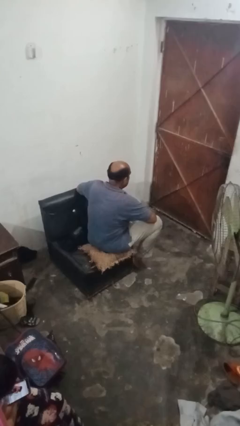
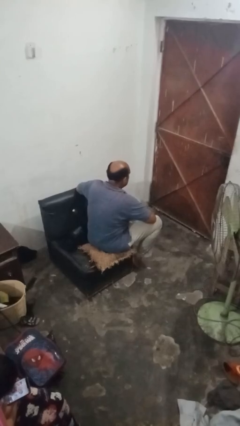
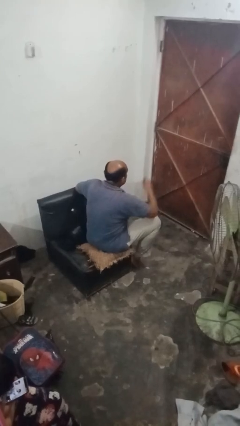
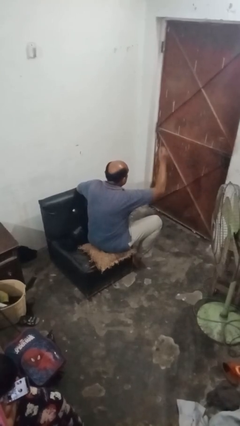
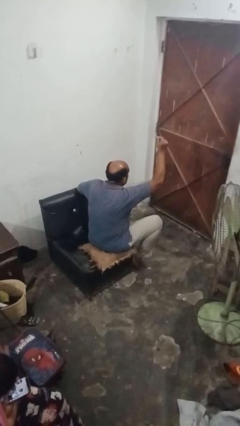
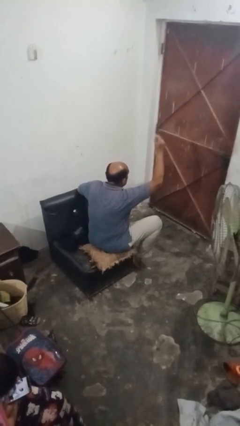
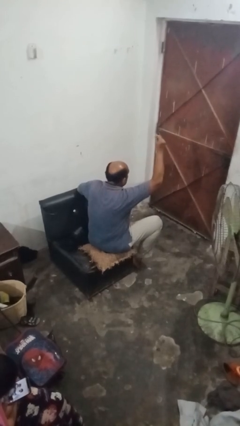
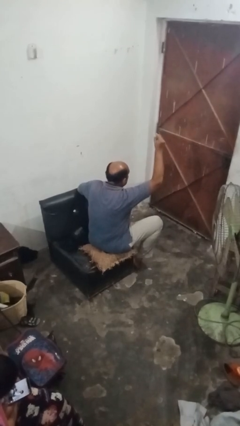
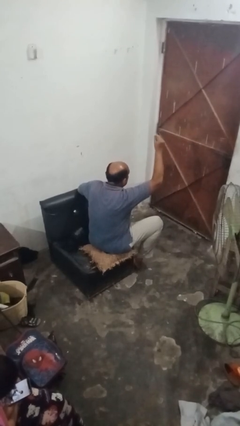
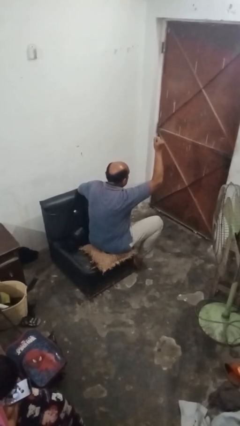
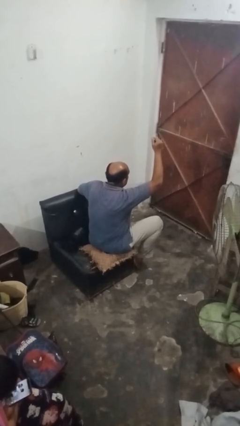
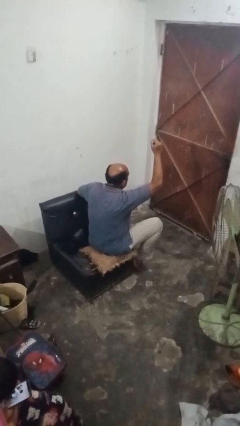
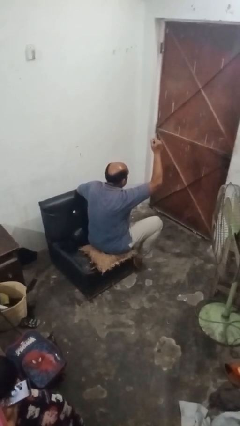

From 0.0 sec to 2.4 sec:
person snaps fingers

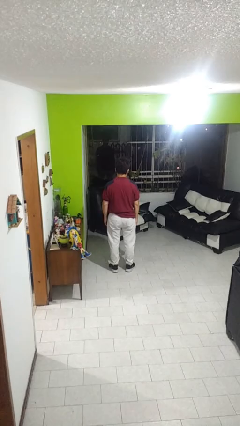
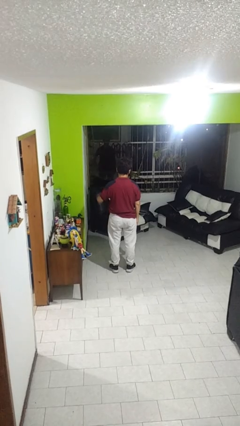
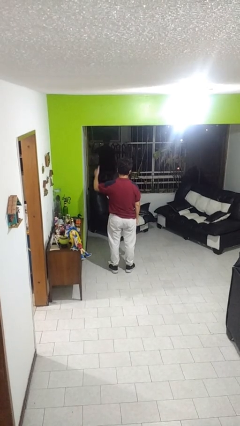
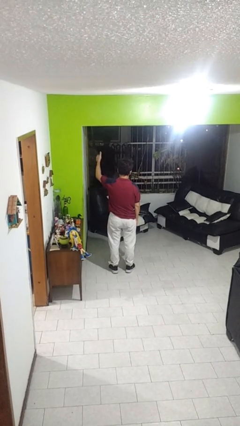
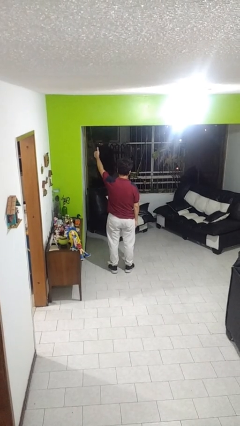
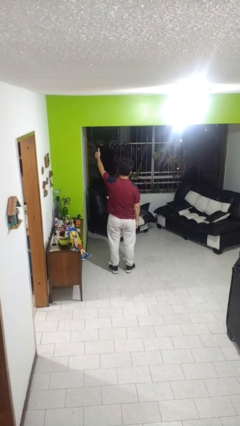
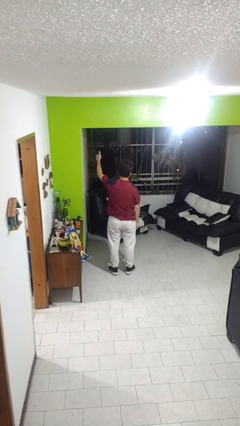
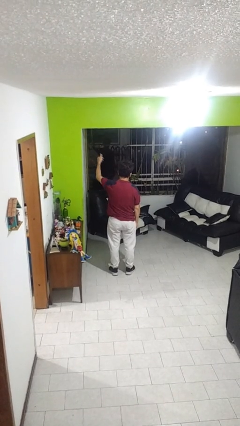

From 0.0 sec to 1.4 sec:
person gestures thumbs up

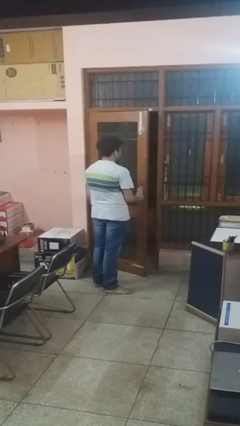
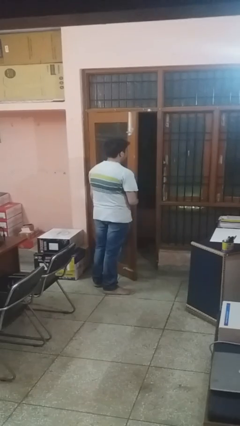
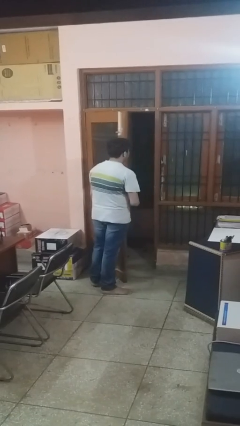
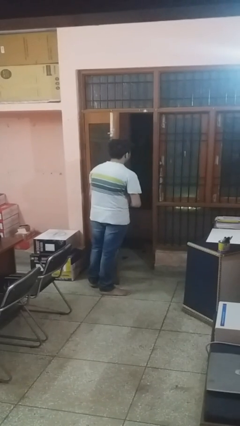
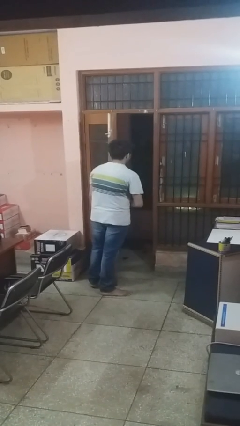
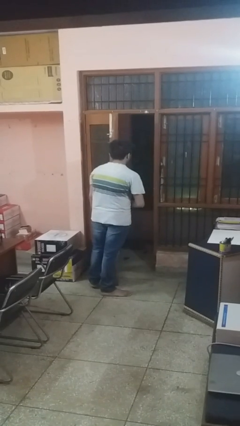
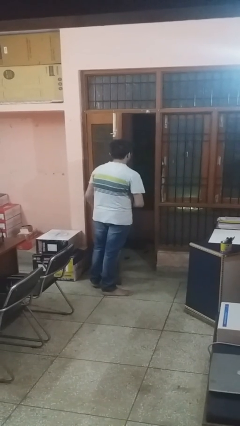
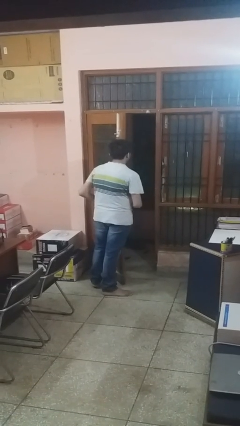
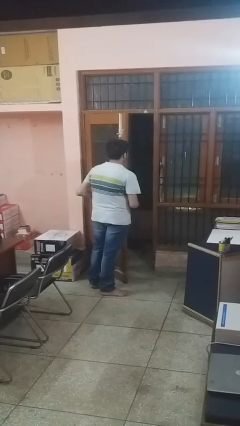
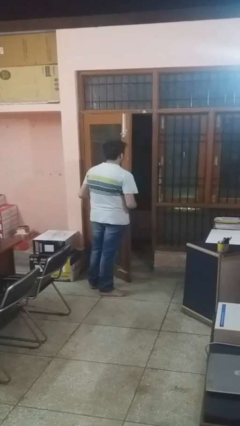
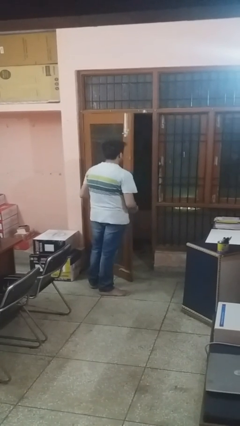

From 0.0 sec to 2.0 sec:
person opens facility door

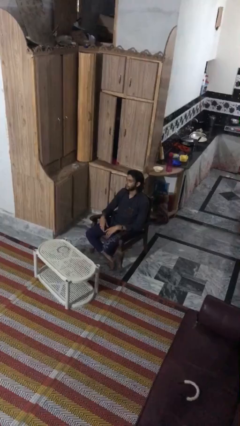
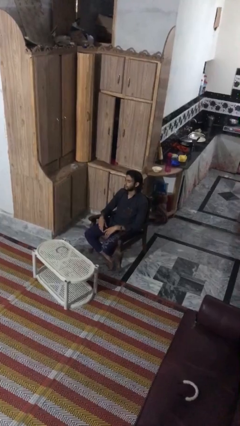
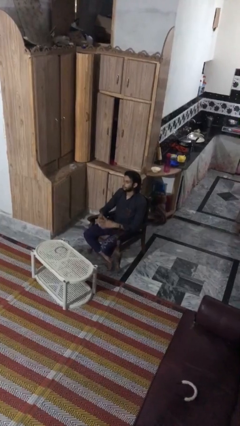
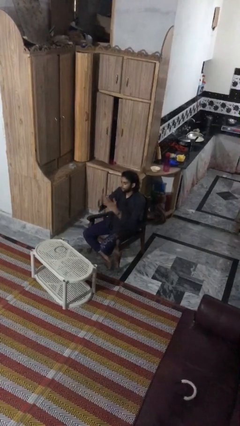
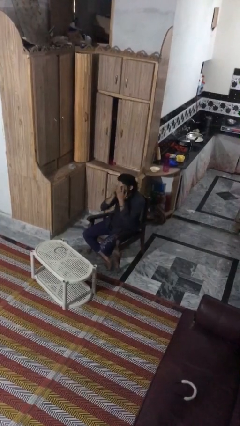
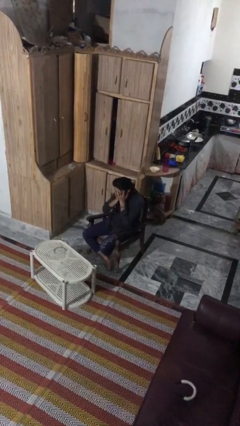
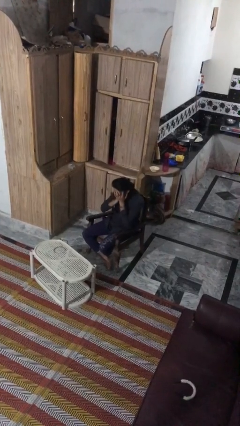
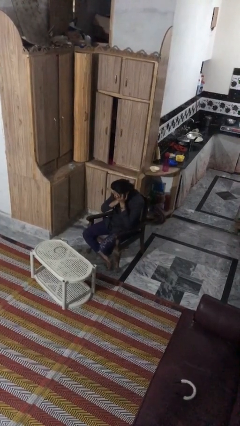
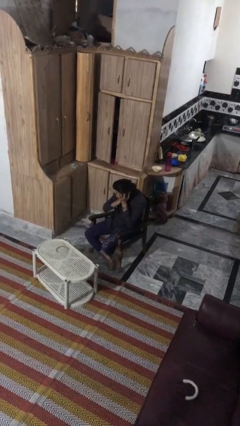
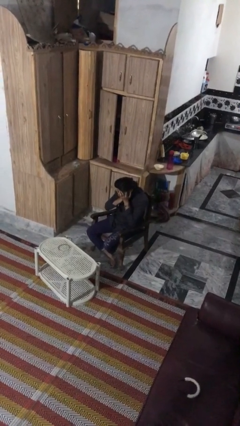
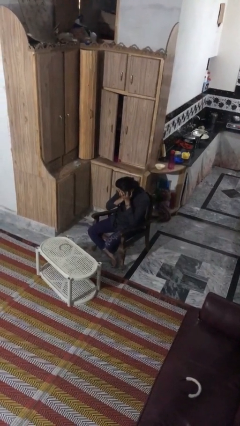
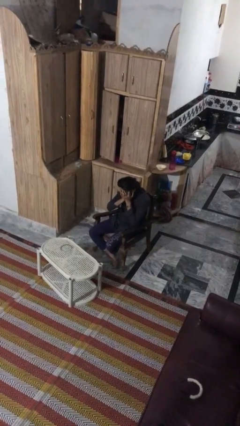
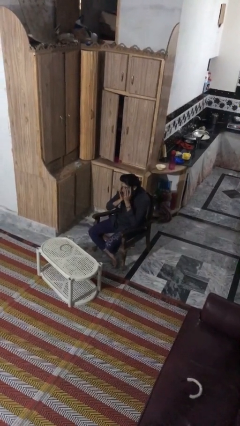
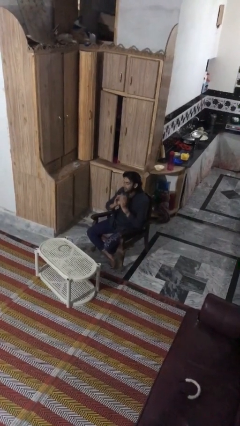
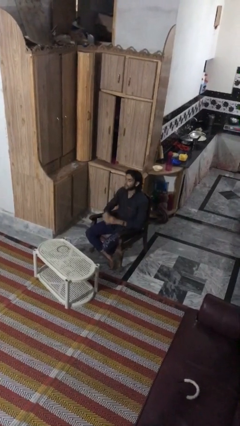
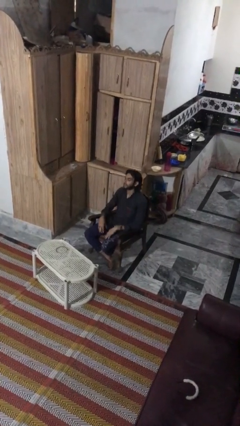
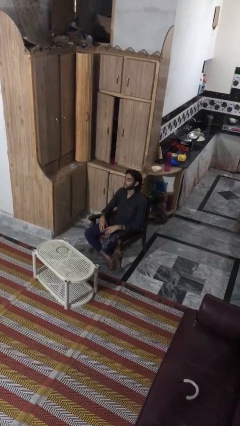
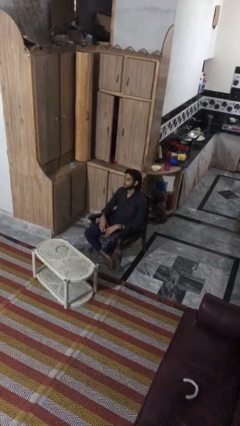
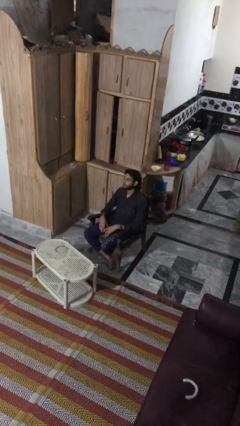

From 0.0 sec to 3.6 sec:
person covers face with hands

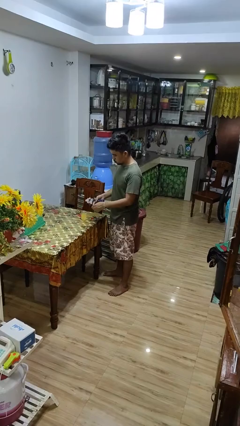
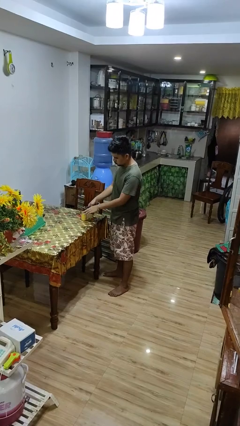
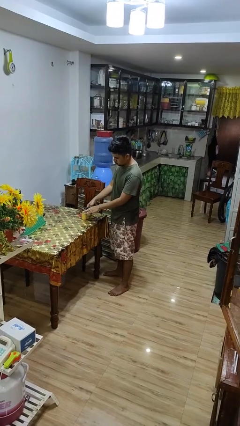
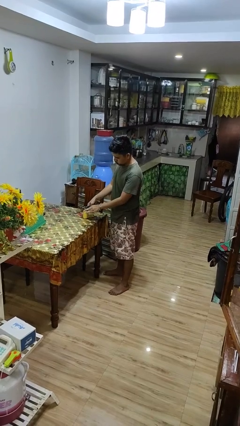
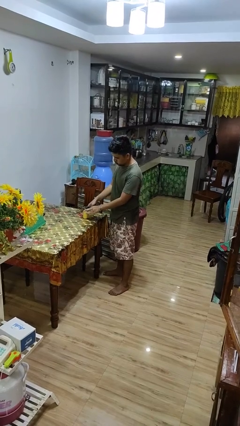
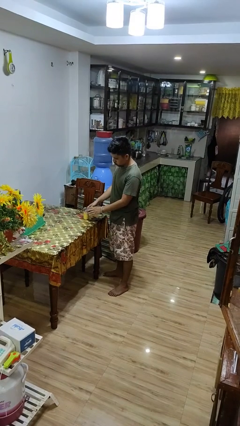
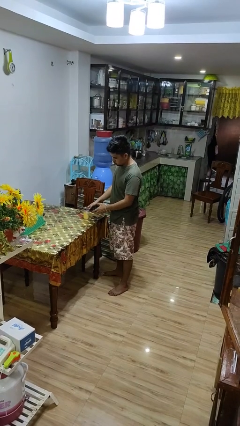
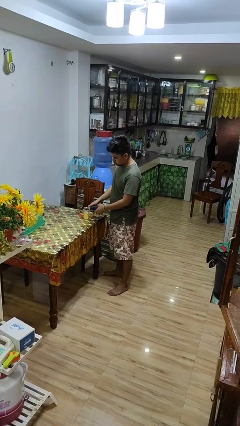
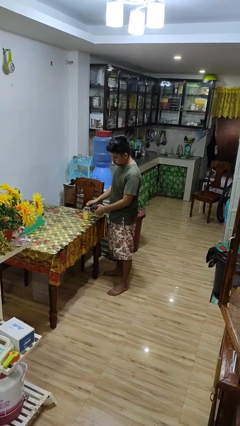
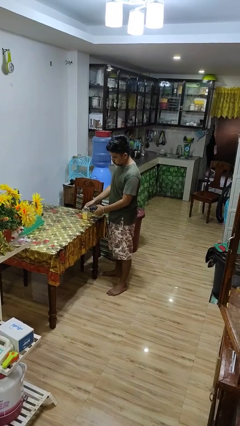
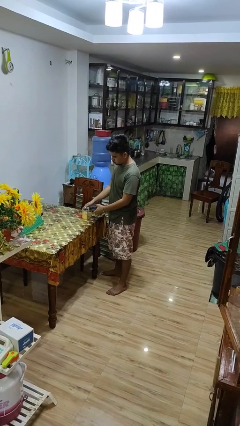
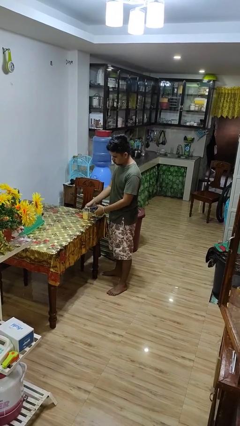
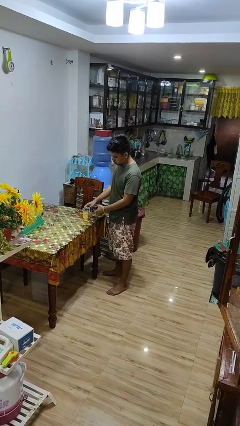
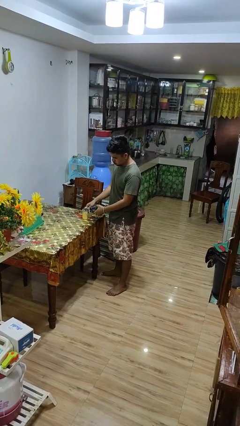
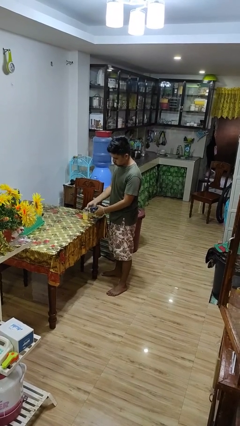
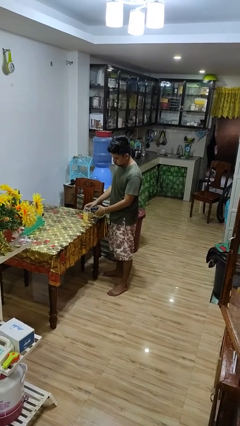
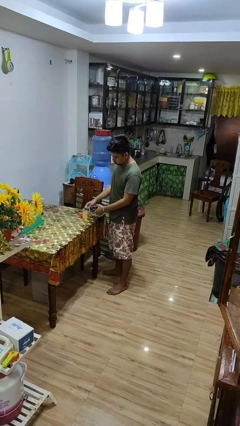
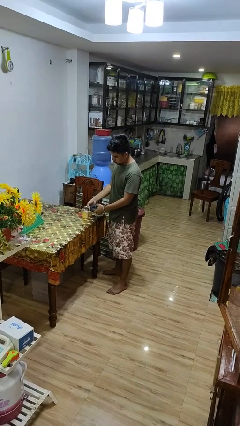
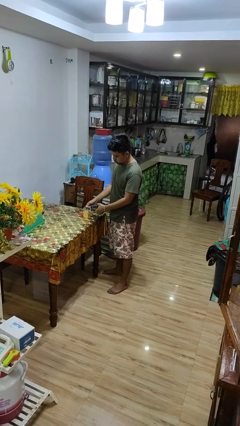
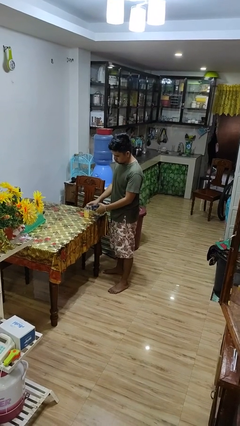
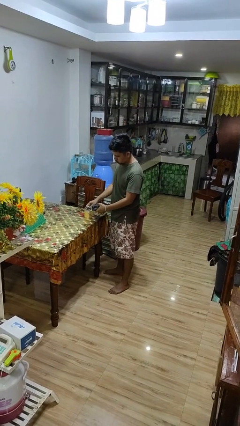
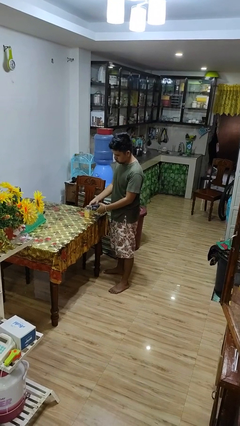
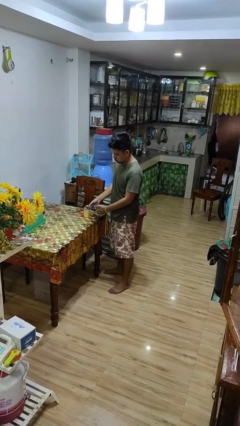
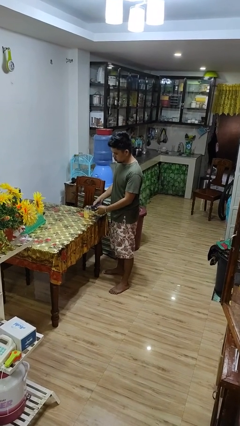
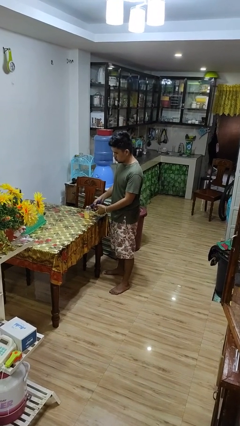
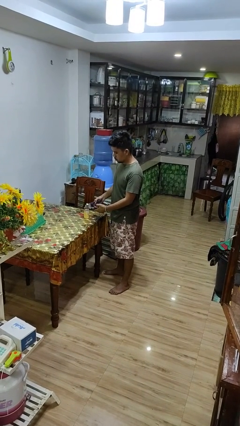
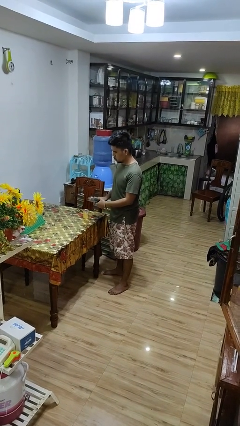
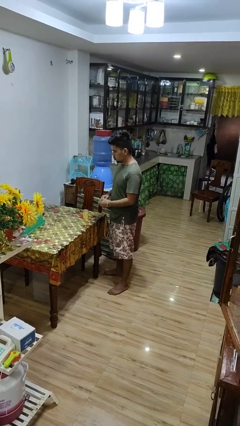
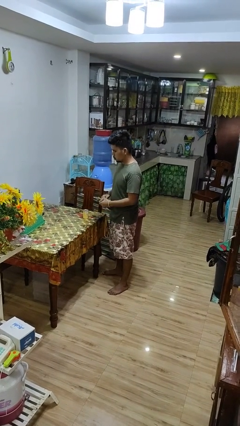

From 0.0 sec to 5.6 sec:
person opens can with can opener

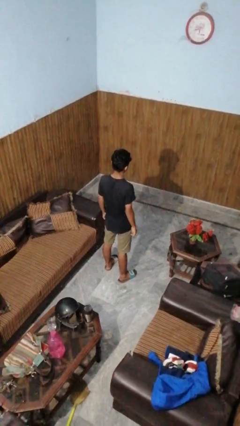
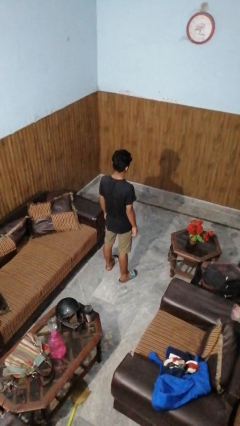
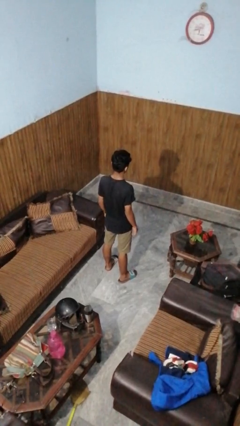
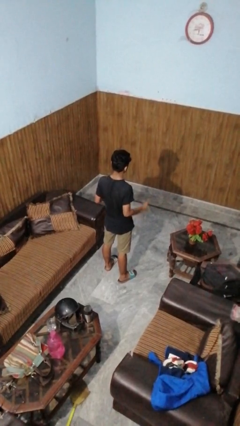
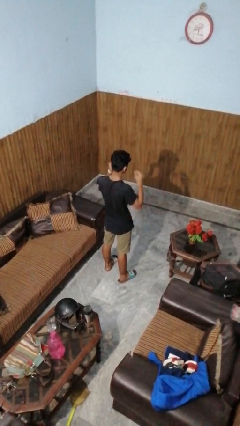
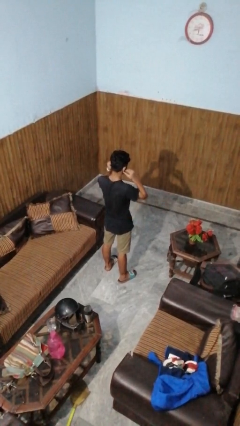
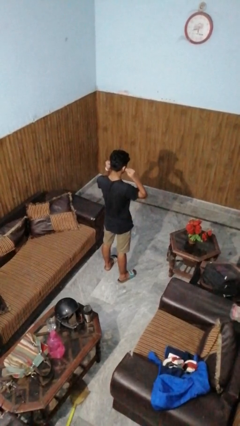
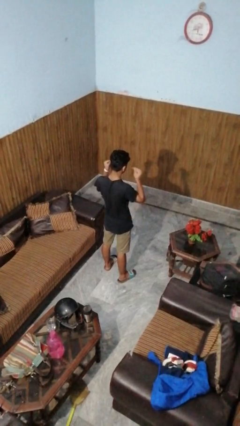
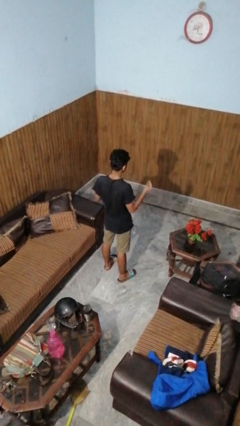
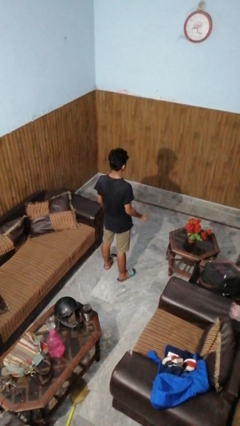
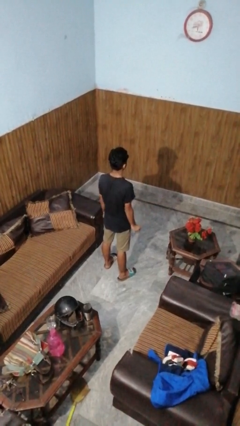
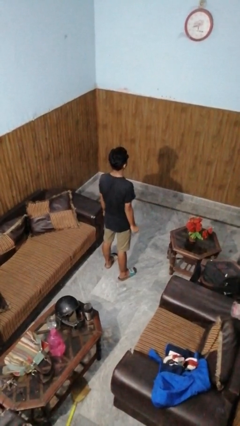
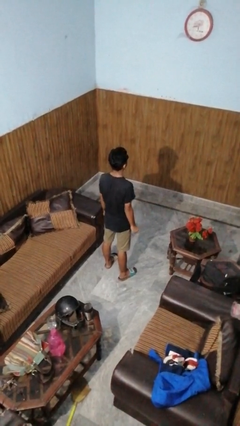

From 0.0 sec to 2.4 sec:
person takes off headphones
